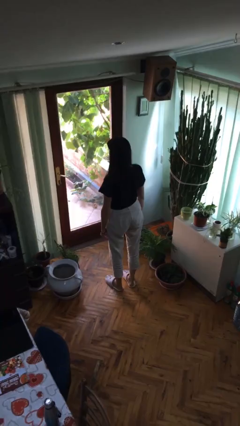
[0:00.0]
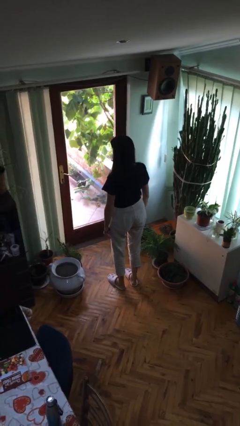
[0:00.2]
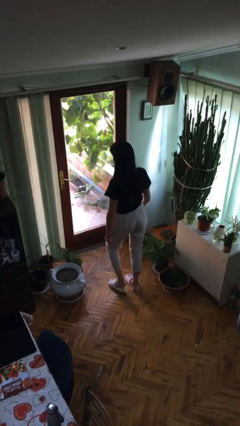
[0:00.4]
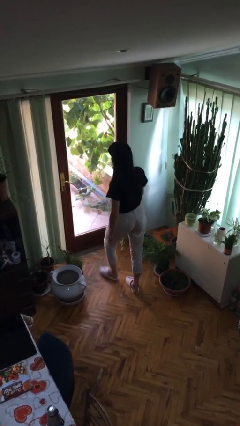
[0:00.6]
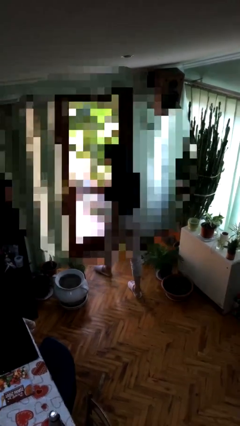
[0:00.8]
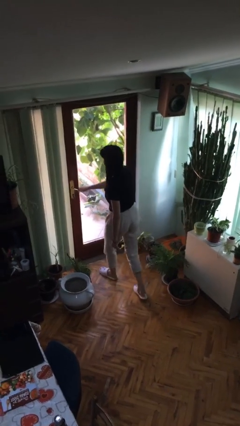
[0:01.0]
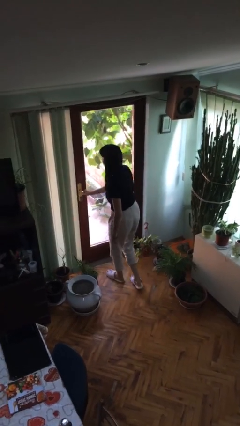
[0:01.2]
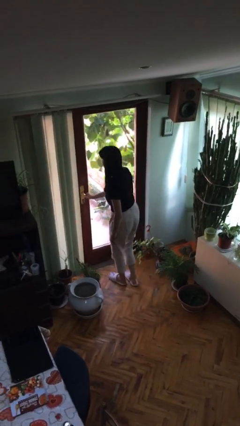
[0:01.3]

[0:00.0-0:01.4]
person opens facility door

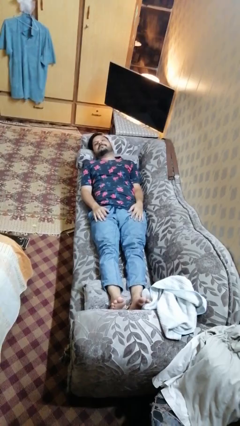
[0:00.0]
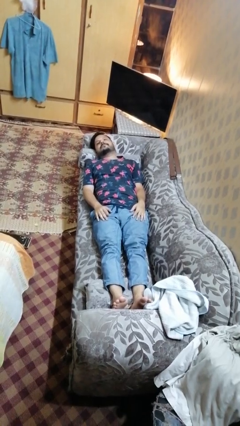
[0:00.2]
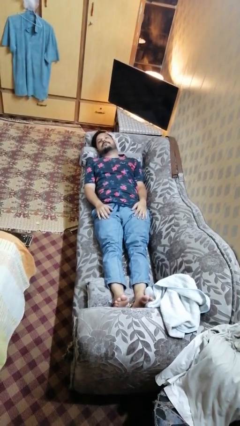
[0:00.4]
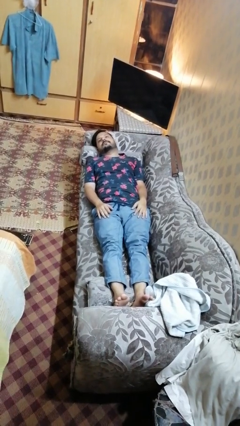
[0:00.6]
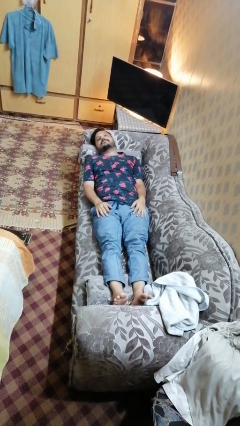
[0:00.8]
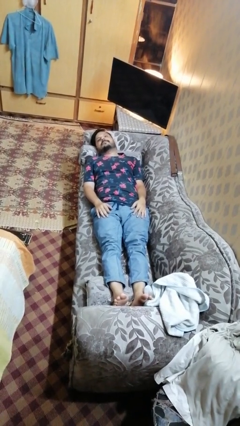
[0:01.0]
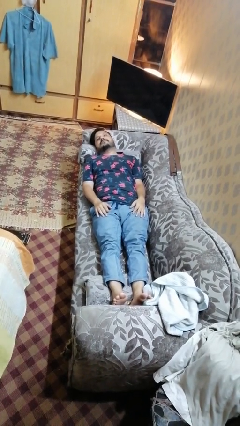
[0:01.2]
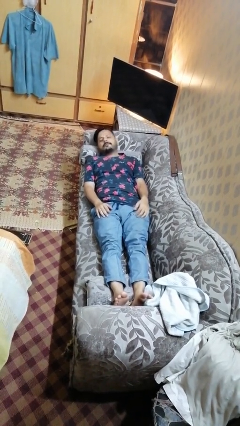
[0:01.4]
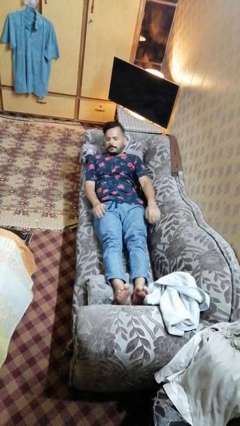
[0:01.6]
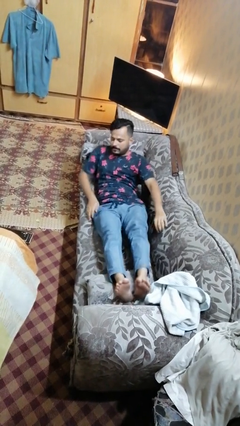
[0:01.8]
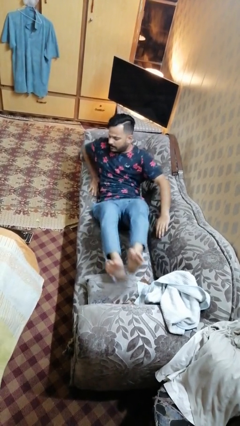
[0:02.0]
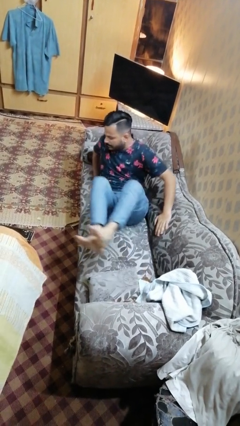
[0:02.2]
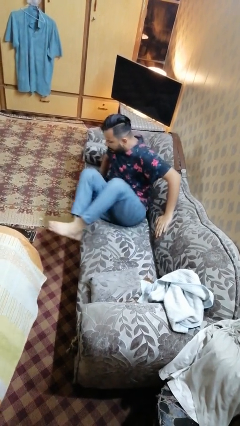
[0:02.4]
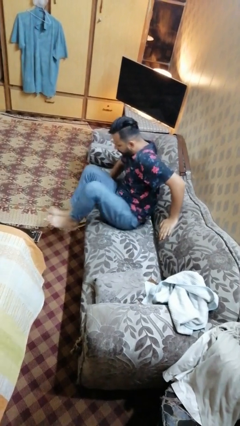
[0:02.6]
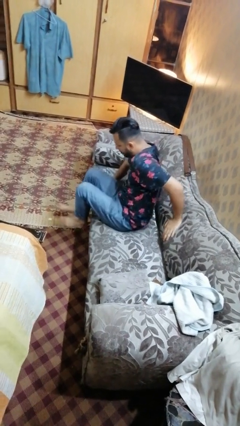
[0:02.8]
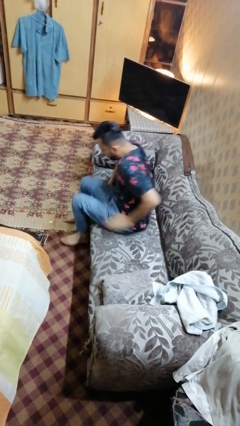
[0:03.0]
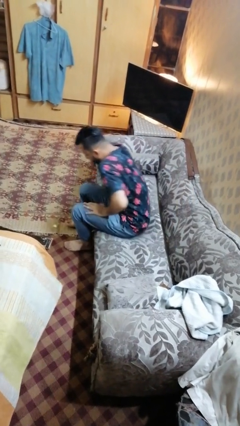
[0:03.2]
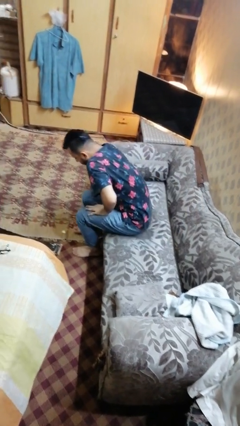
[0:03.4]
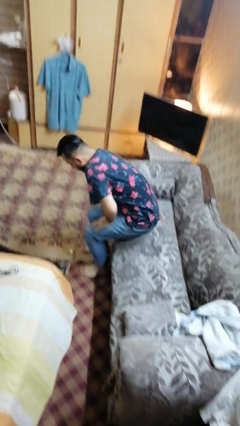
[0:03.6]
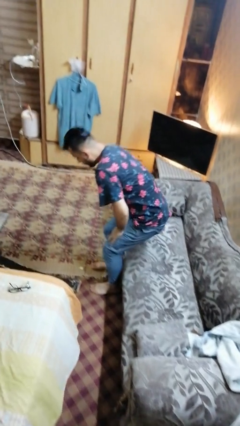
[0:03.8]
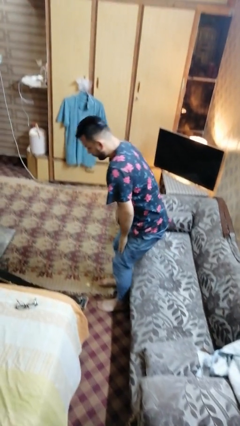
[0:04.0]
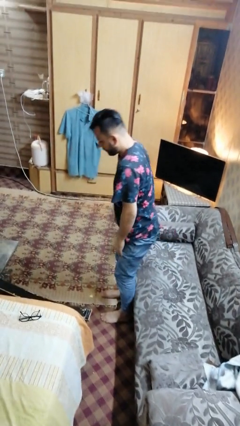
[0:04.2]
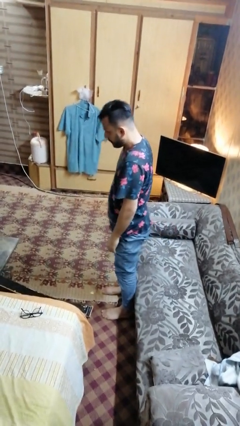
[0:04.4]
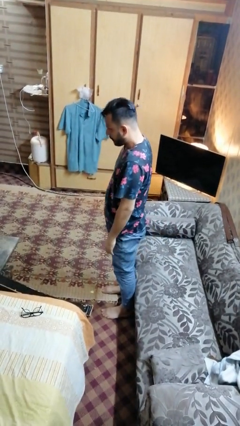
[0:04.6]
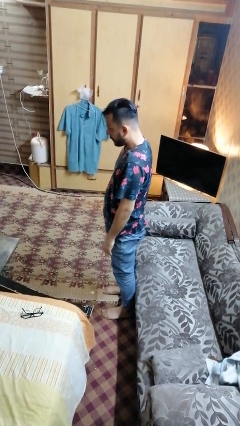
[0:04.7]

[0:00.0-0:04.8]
person stands up

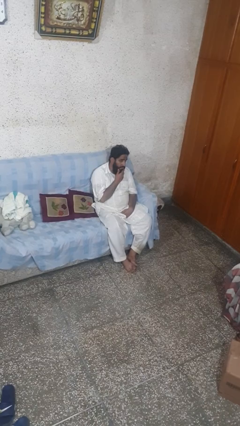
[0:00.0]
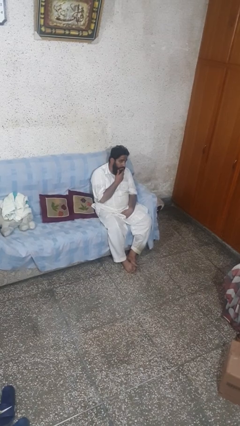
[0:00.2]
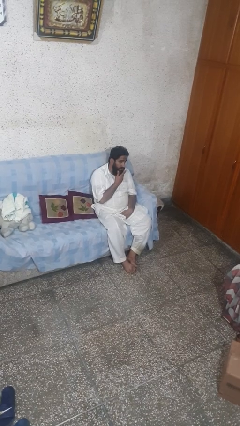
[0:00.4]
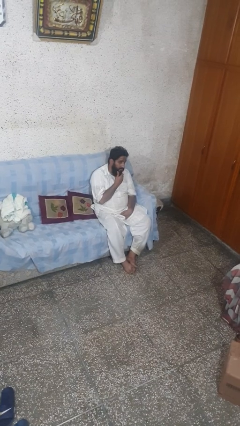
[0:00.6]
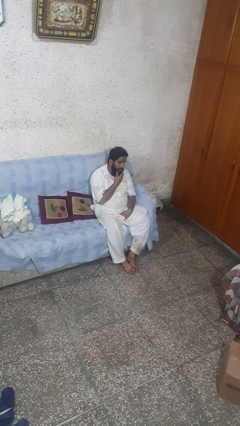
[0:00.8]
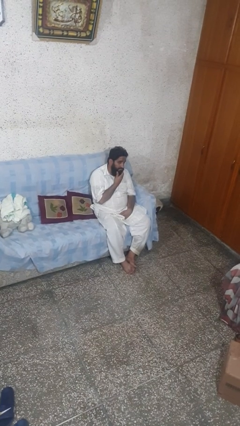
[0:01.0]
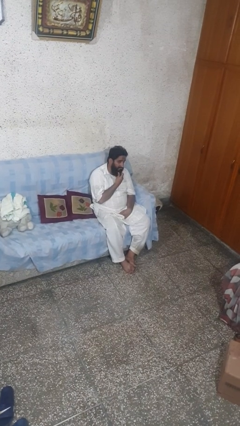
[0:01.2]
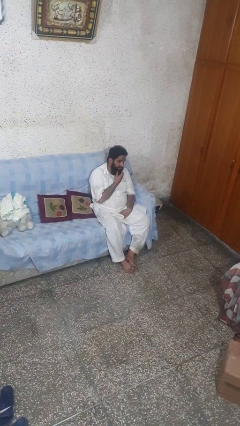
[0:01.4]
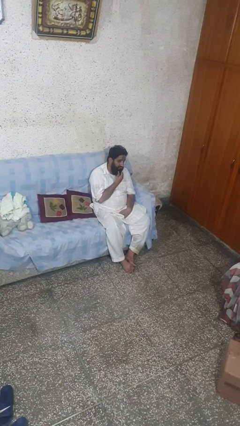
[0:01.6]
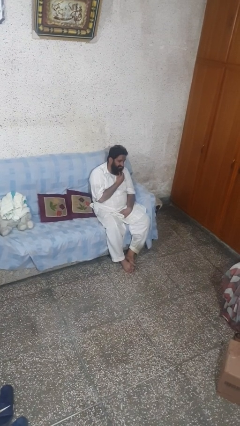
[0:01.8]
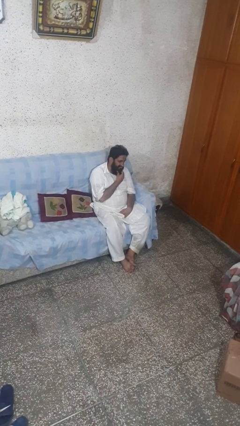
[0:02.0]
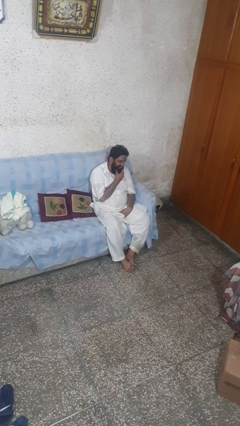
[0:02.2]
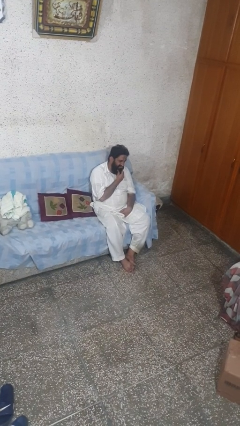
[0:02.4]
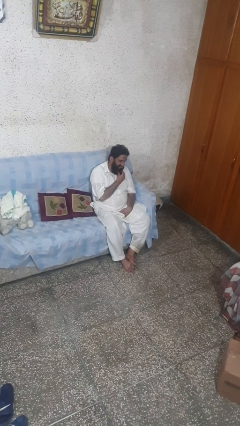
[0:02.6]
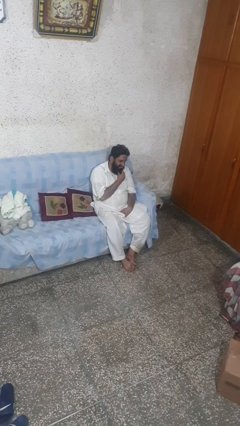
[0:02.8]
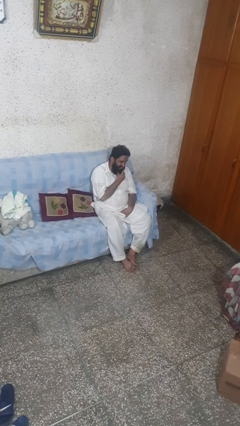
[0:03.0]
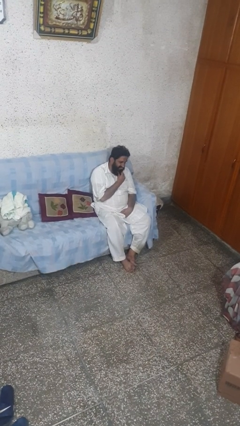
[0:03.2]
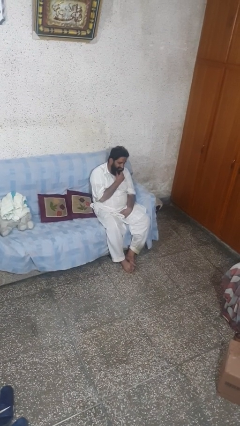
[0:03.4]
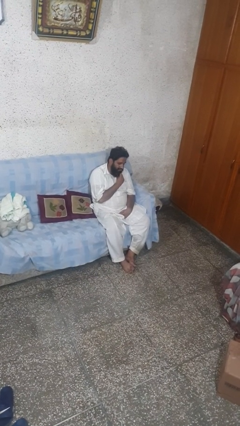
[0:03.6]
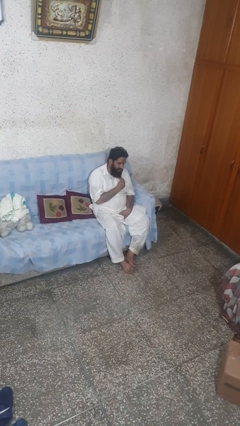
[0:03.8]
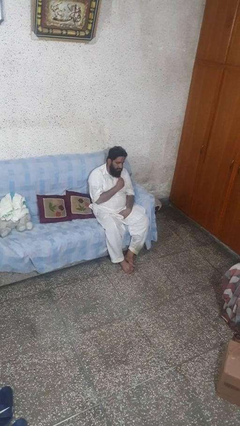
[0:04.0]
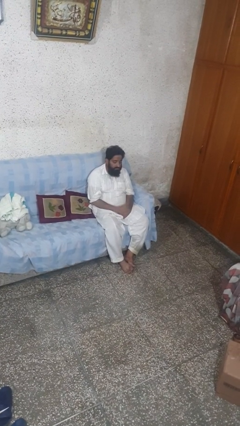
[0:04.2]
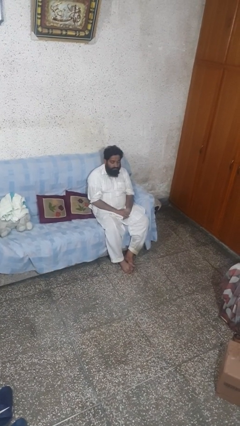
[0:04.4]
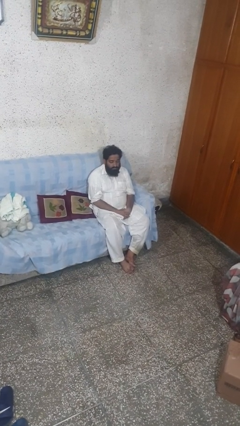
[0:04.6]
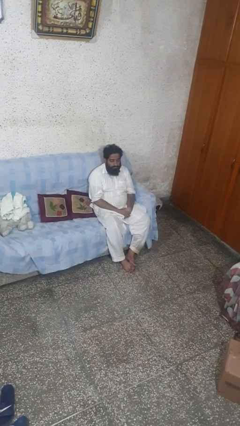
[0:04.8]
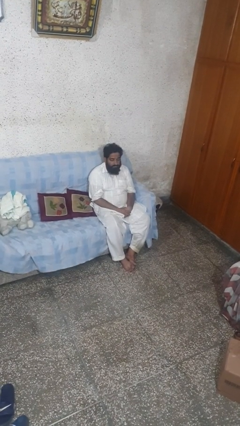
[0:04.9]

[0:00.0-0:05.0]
person strokes chin

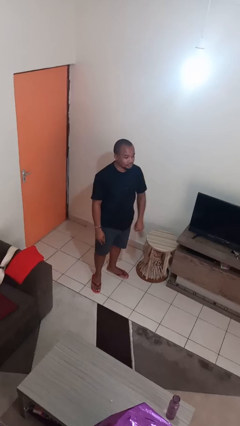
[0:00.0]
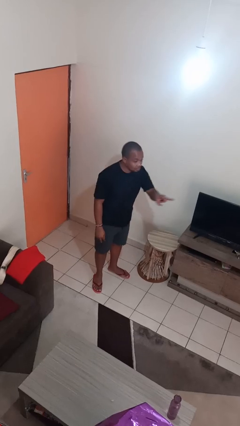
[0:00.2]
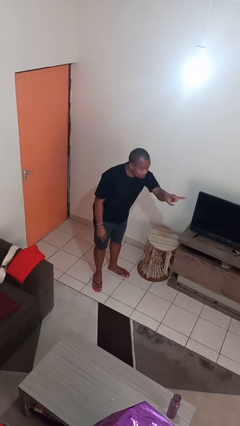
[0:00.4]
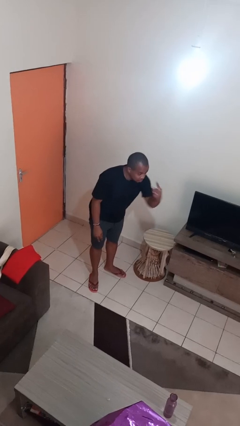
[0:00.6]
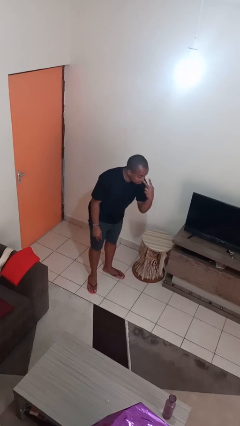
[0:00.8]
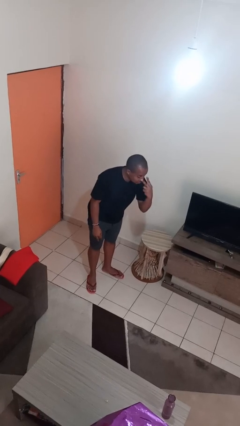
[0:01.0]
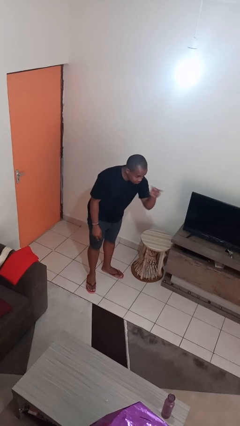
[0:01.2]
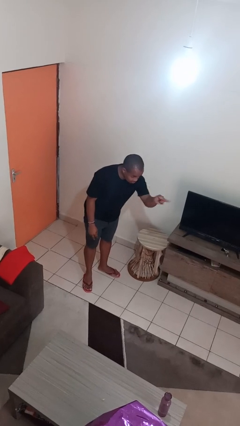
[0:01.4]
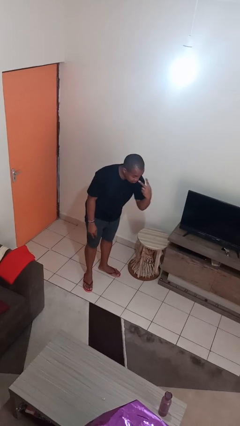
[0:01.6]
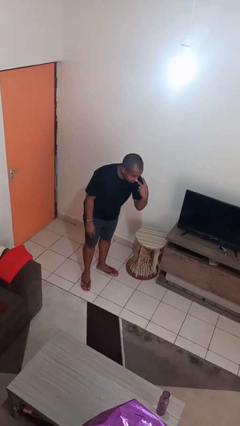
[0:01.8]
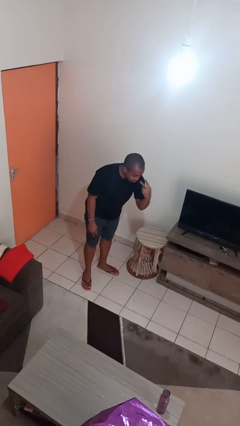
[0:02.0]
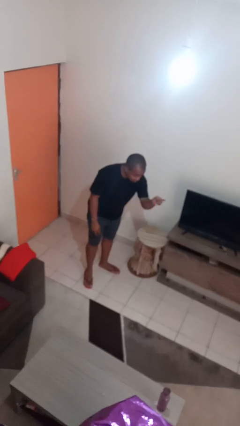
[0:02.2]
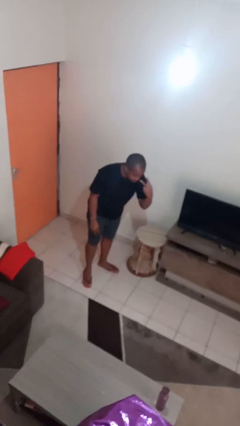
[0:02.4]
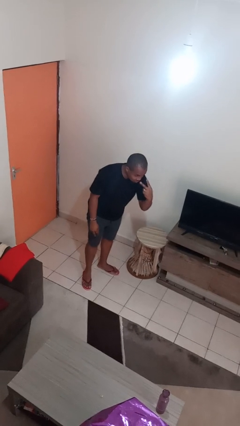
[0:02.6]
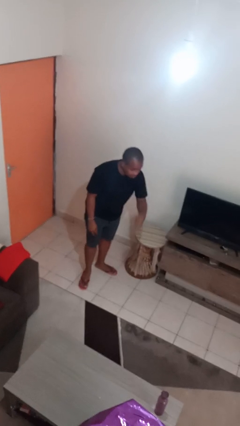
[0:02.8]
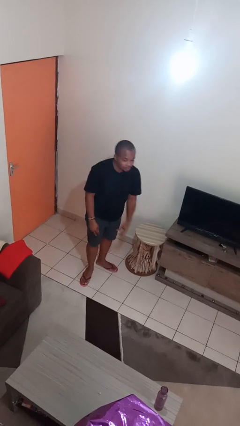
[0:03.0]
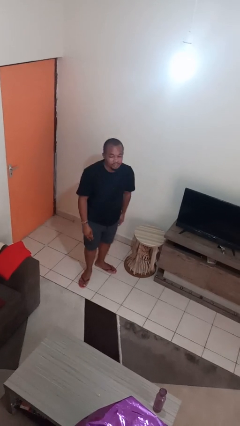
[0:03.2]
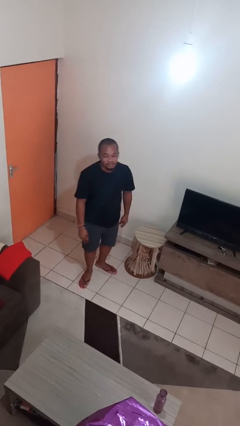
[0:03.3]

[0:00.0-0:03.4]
person gestures watch closely

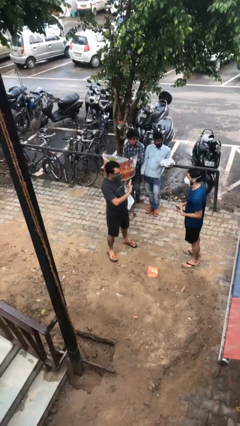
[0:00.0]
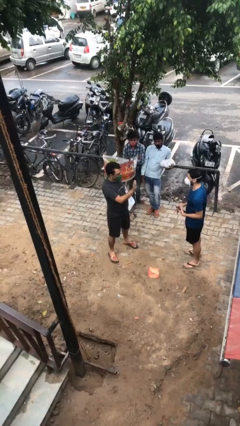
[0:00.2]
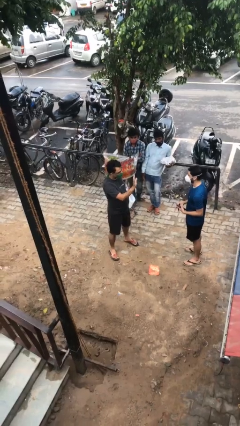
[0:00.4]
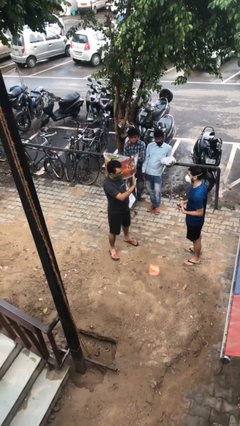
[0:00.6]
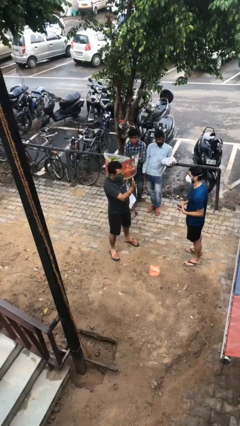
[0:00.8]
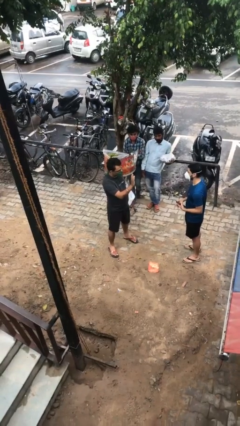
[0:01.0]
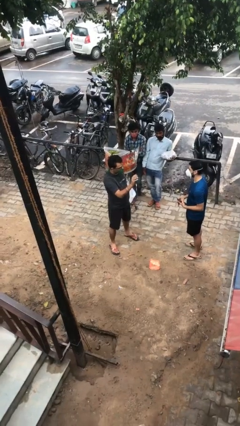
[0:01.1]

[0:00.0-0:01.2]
person waves at person

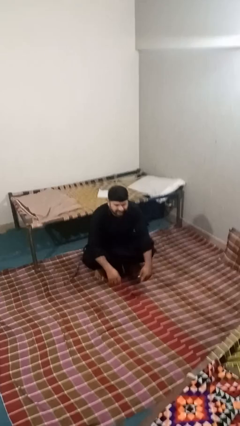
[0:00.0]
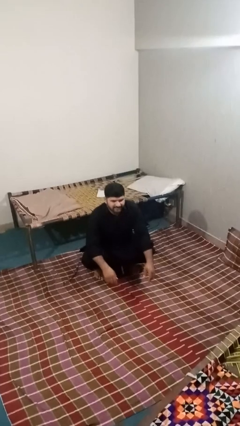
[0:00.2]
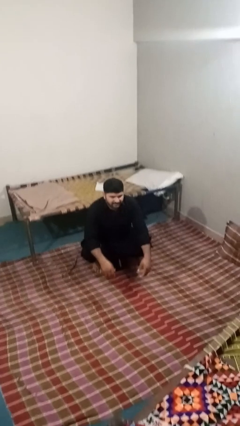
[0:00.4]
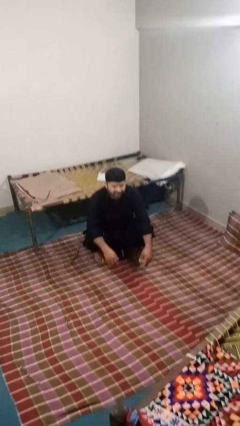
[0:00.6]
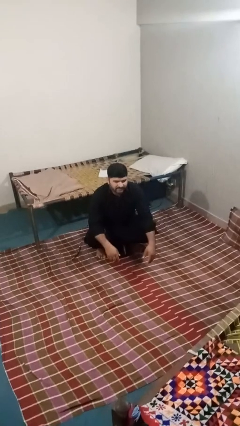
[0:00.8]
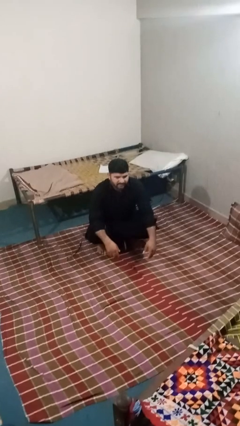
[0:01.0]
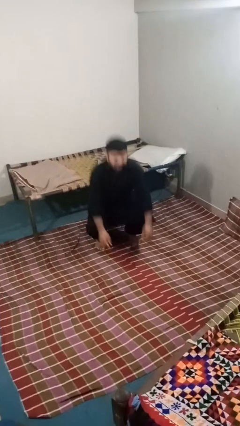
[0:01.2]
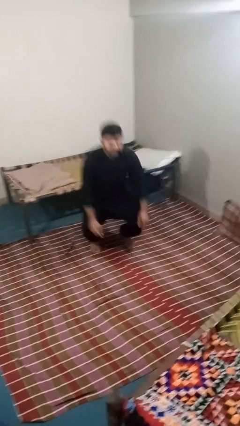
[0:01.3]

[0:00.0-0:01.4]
person squats

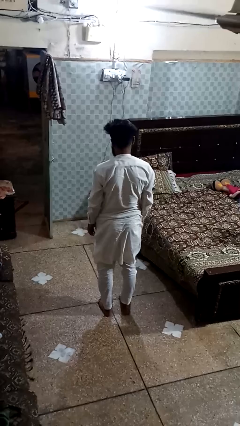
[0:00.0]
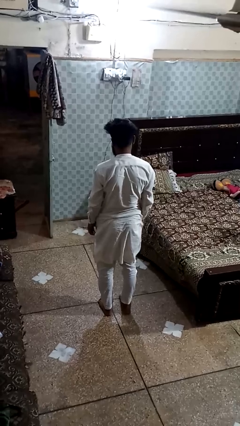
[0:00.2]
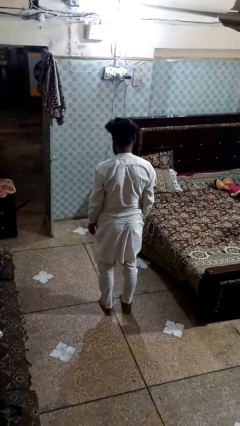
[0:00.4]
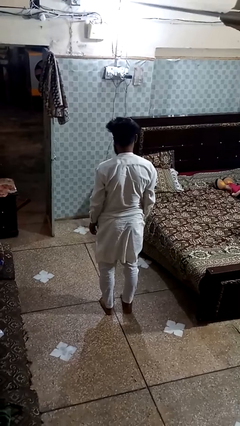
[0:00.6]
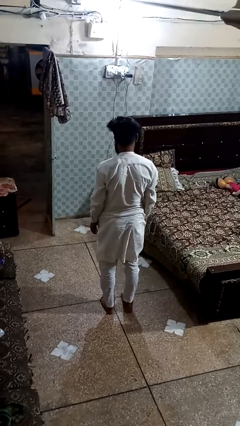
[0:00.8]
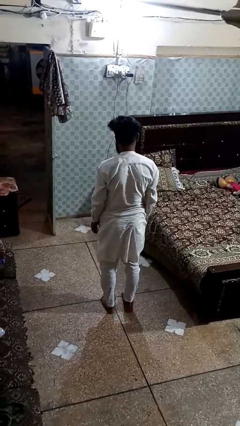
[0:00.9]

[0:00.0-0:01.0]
person exercises with plank
